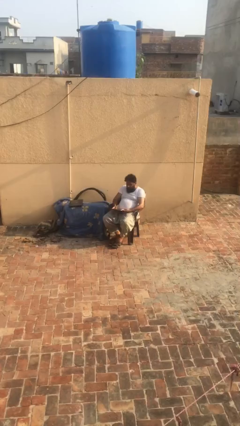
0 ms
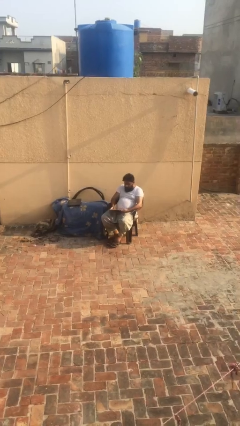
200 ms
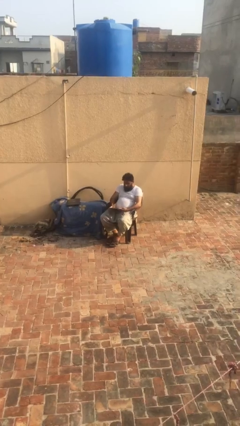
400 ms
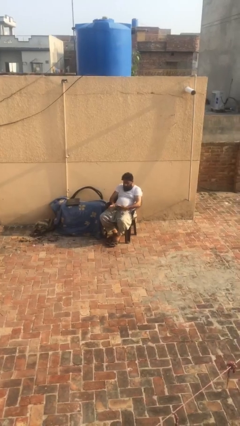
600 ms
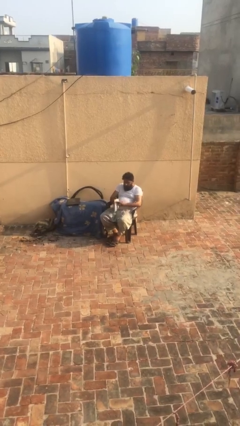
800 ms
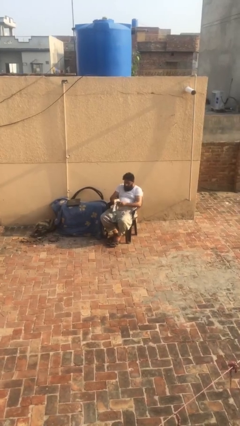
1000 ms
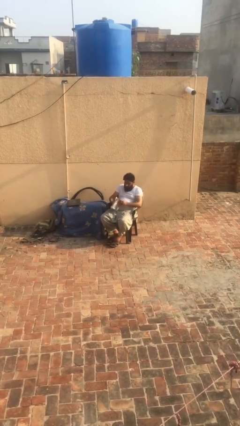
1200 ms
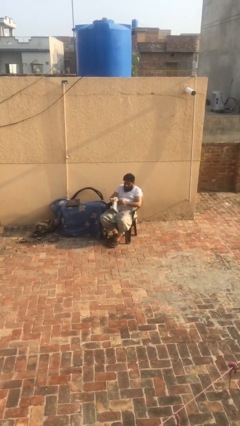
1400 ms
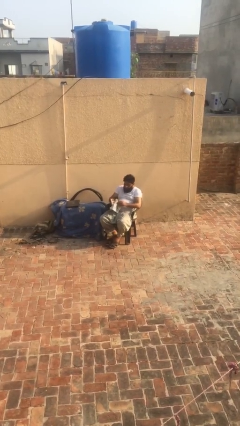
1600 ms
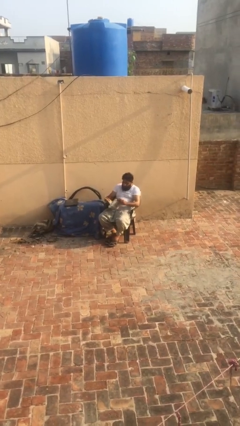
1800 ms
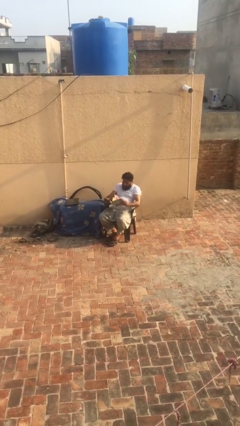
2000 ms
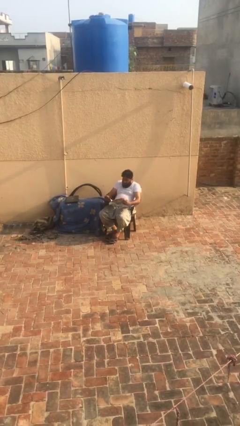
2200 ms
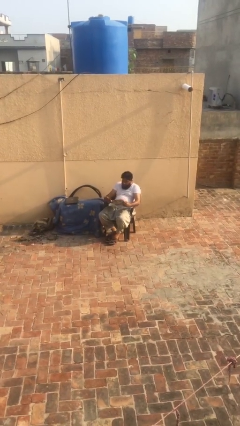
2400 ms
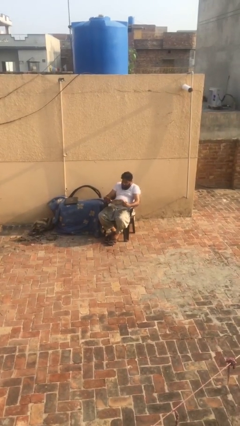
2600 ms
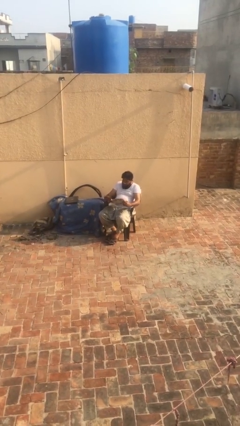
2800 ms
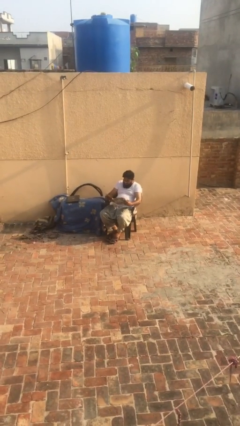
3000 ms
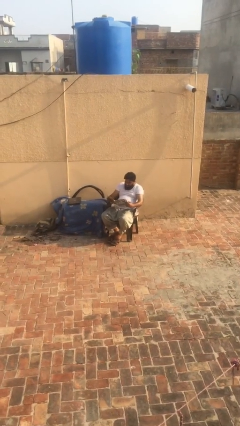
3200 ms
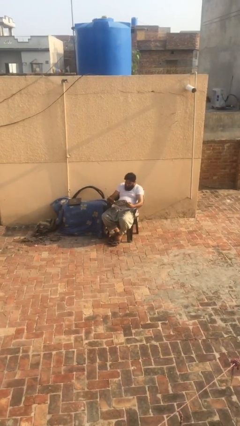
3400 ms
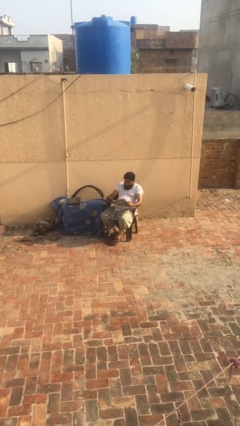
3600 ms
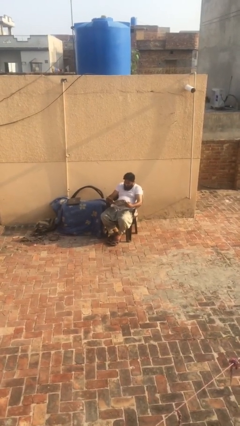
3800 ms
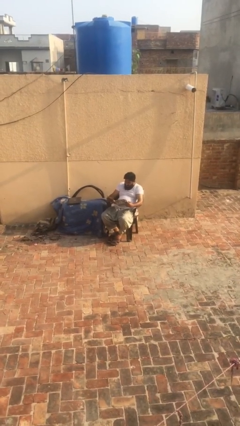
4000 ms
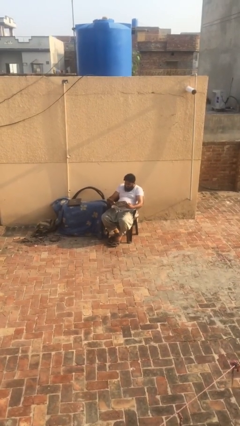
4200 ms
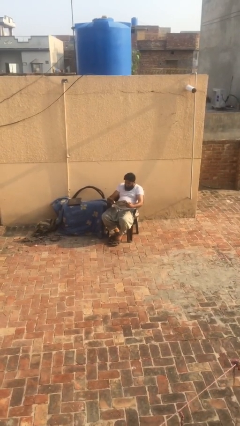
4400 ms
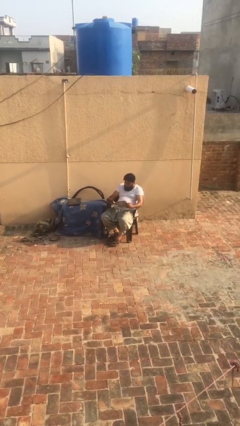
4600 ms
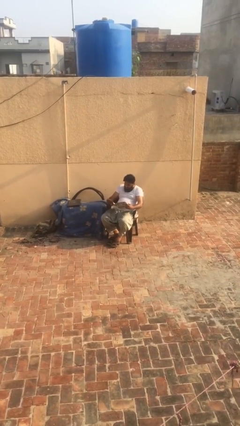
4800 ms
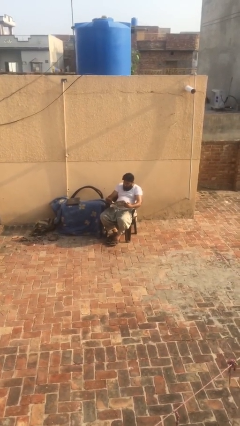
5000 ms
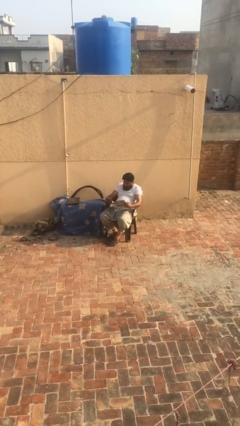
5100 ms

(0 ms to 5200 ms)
person reads document

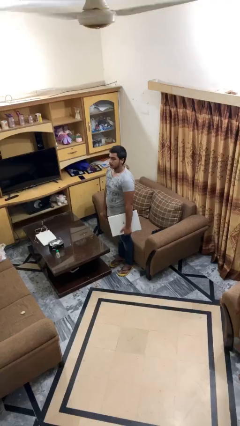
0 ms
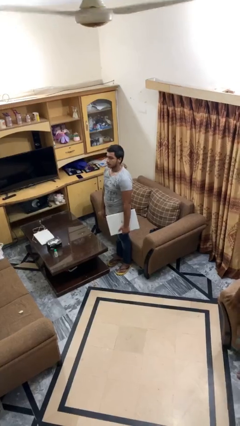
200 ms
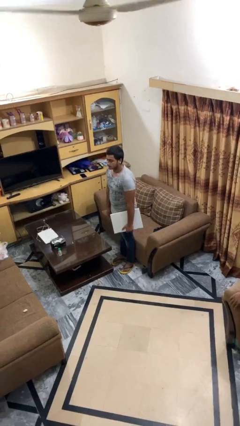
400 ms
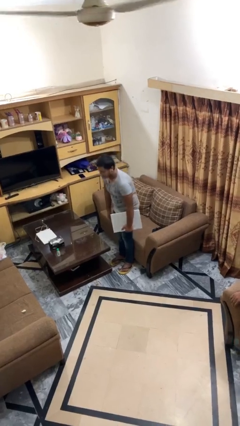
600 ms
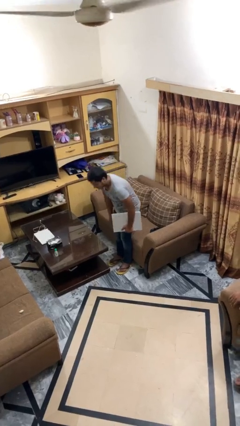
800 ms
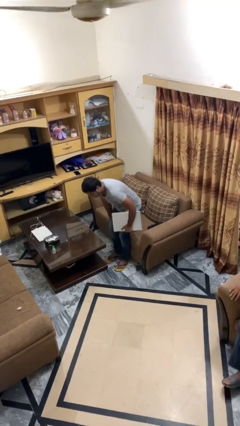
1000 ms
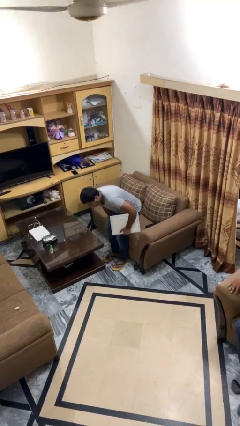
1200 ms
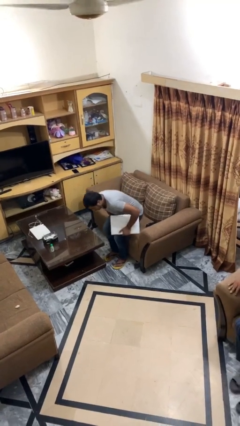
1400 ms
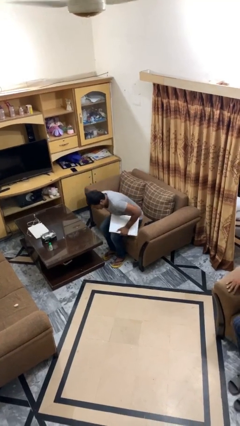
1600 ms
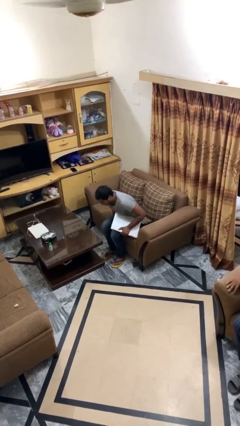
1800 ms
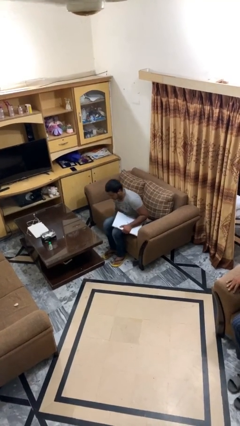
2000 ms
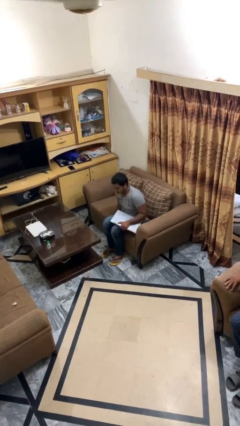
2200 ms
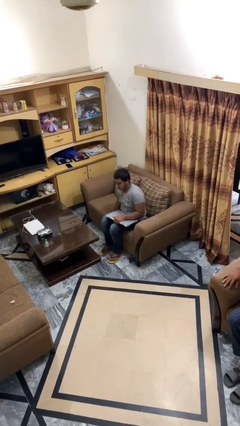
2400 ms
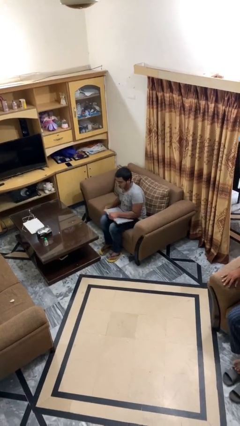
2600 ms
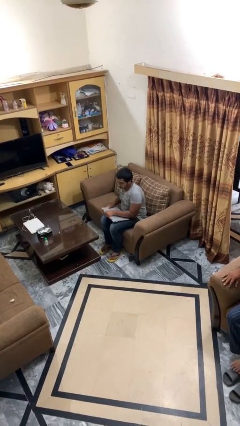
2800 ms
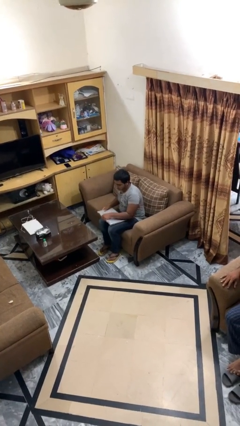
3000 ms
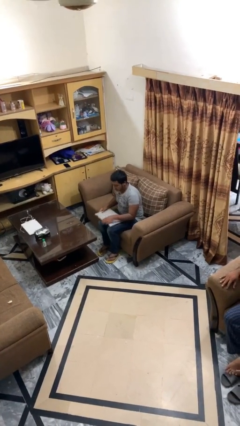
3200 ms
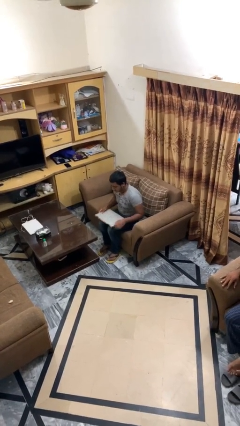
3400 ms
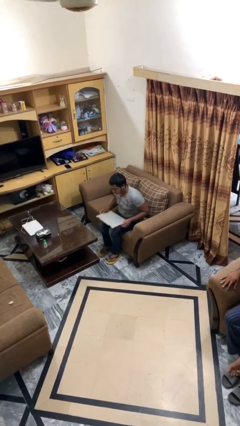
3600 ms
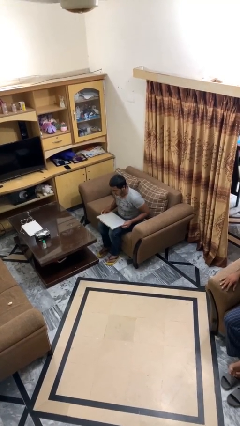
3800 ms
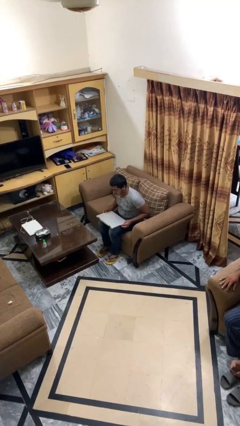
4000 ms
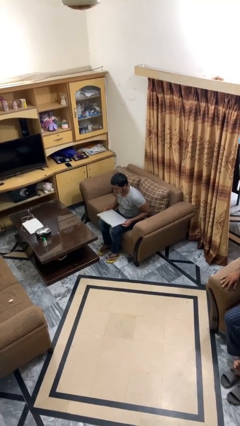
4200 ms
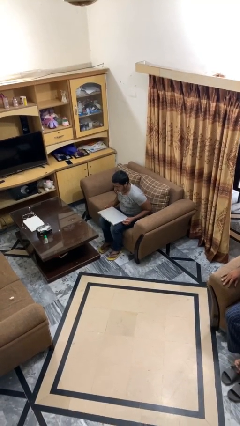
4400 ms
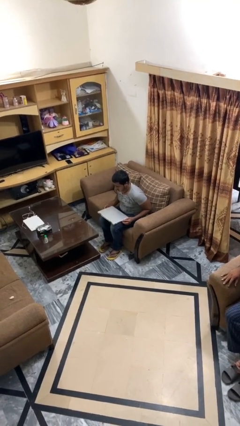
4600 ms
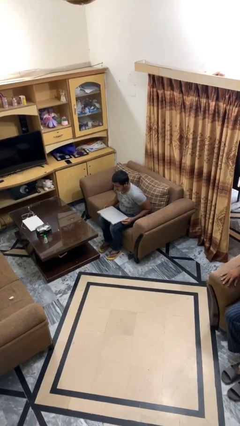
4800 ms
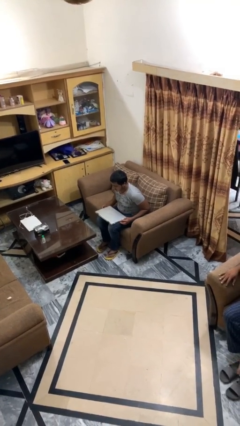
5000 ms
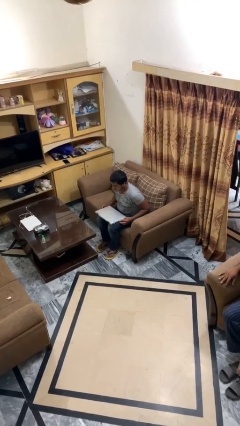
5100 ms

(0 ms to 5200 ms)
person sits down

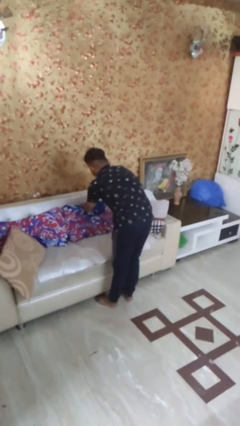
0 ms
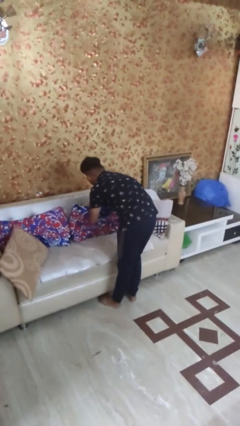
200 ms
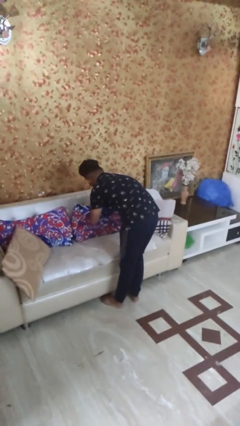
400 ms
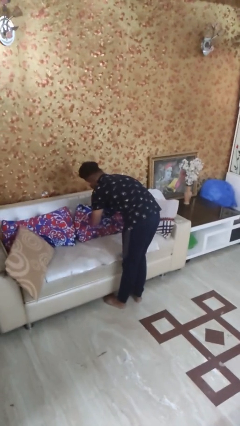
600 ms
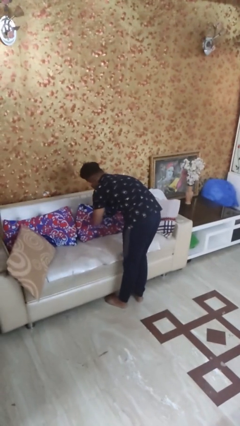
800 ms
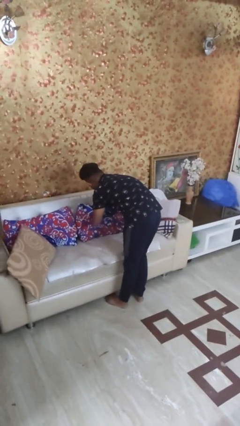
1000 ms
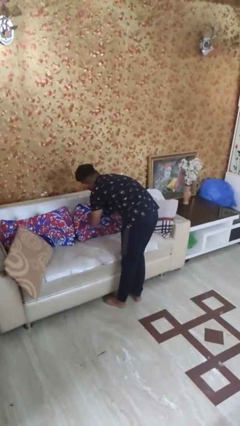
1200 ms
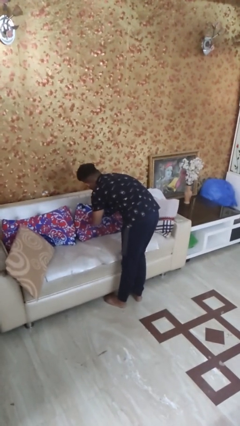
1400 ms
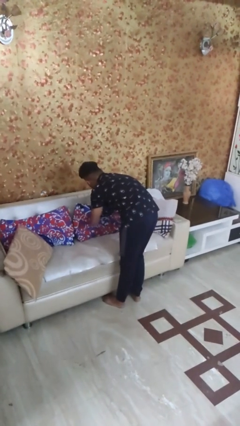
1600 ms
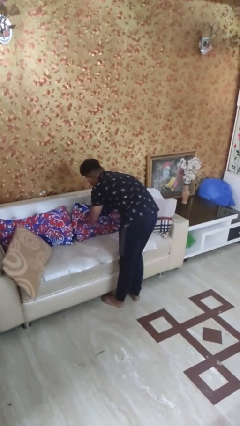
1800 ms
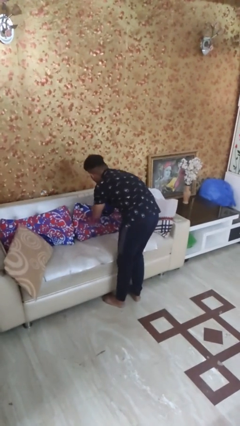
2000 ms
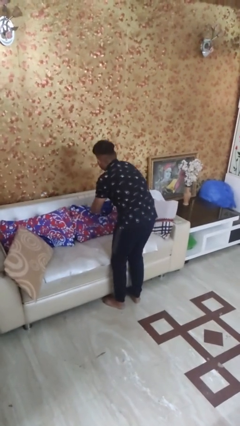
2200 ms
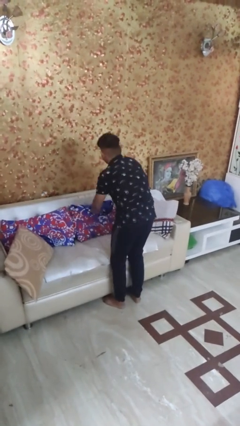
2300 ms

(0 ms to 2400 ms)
person searches in couch

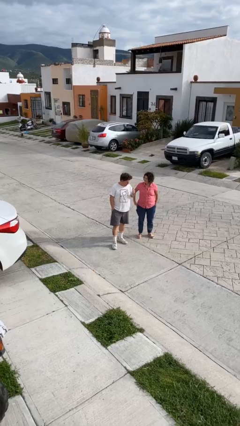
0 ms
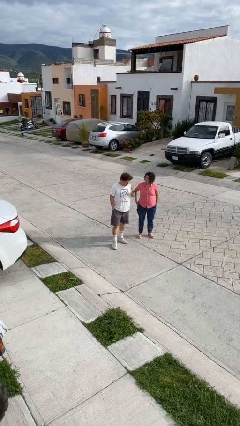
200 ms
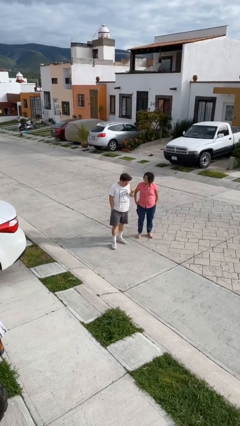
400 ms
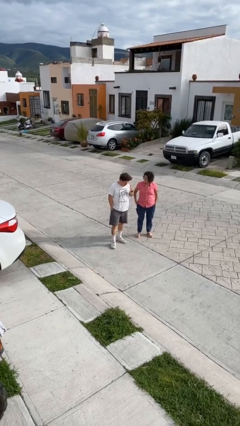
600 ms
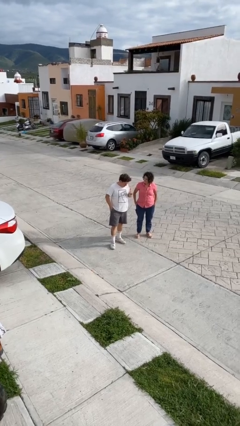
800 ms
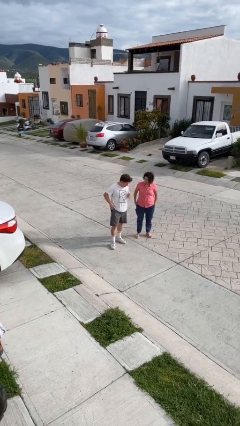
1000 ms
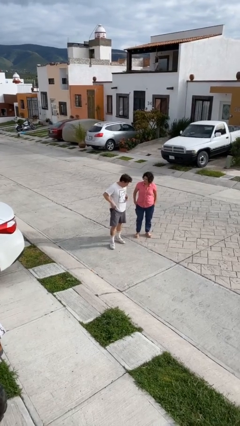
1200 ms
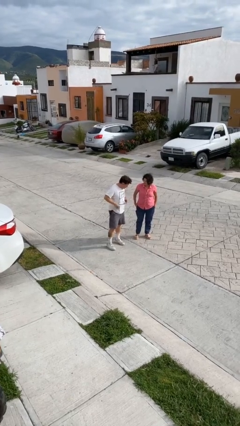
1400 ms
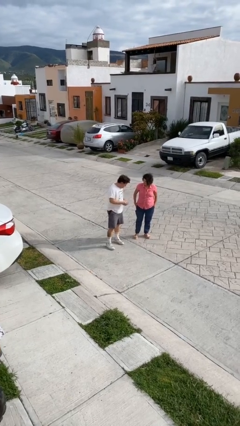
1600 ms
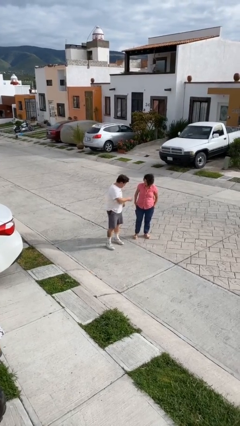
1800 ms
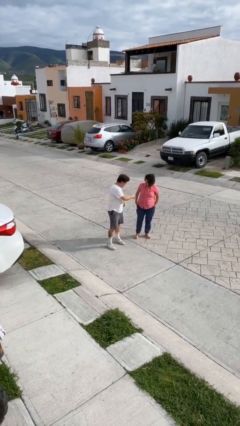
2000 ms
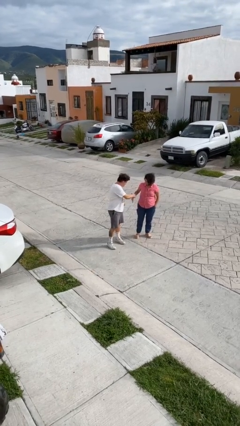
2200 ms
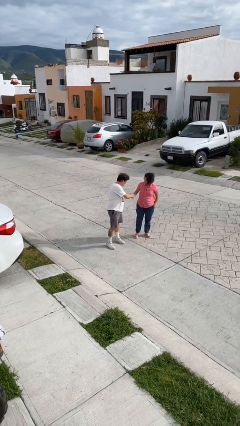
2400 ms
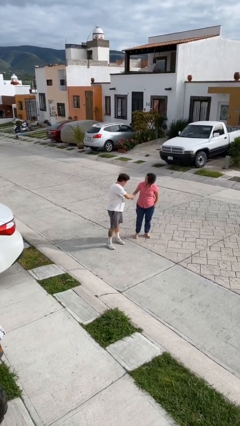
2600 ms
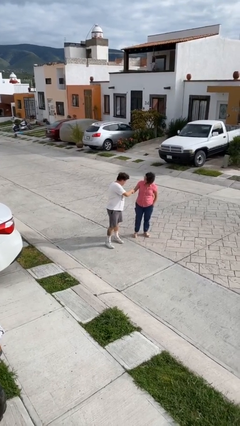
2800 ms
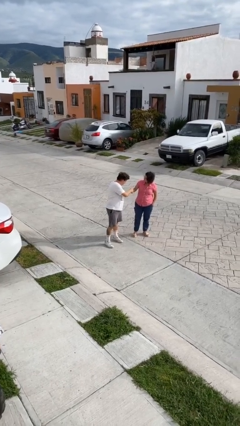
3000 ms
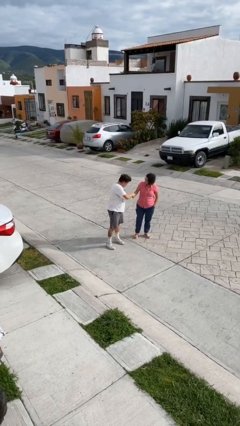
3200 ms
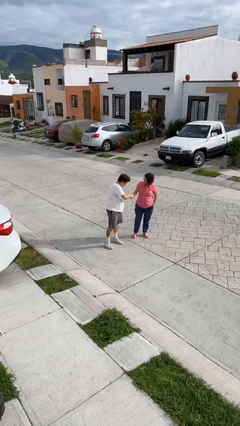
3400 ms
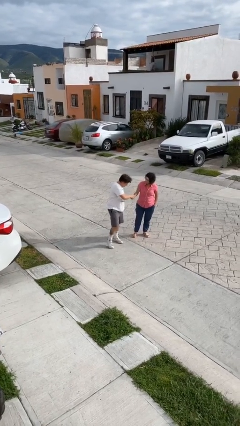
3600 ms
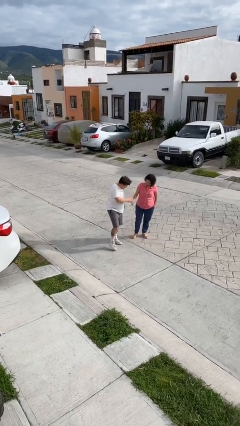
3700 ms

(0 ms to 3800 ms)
person shakes hand

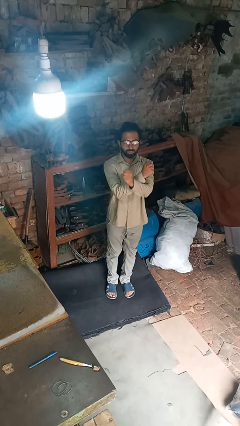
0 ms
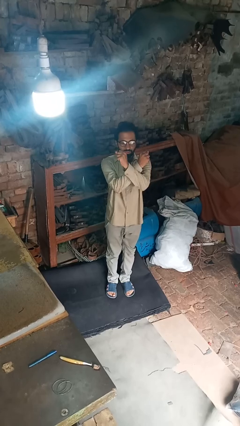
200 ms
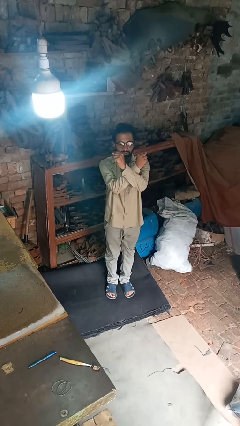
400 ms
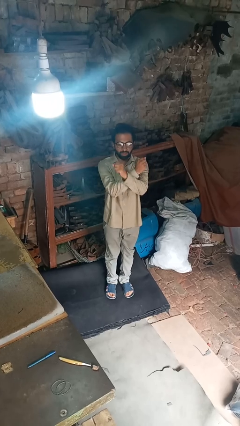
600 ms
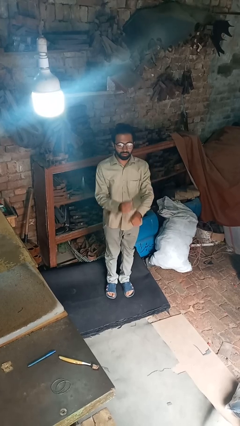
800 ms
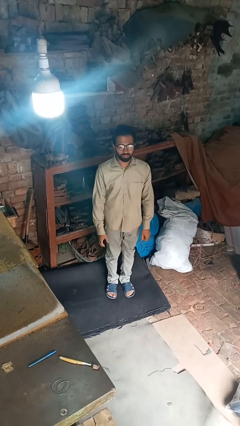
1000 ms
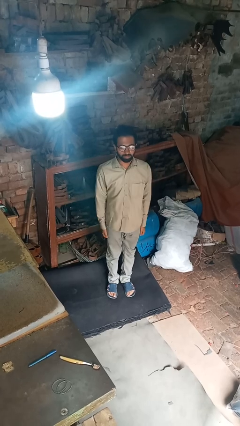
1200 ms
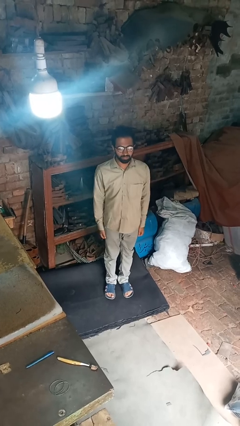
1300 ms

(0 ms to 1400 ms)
person karate chop
